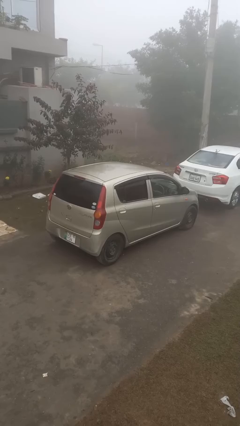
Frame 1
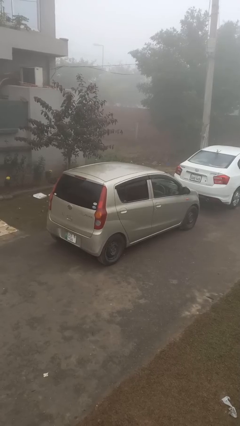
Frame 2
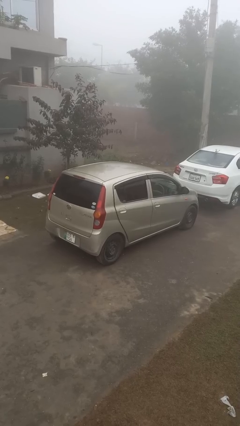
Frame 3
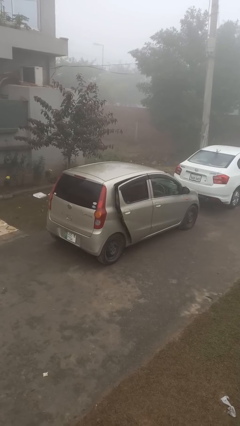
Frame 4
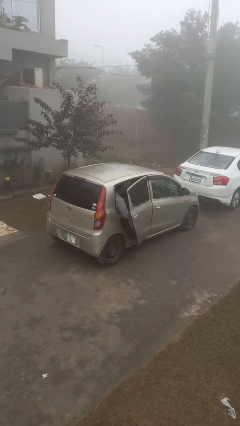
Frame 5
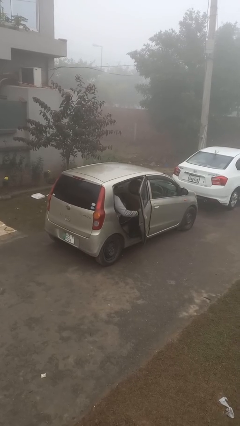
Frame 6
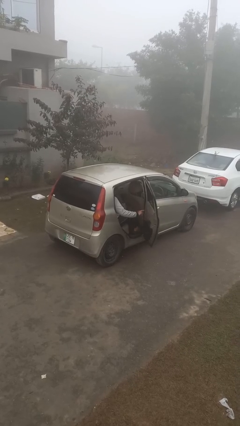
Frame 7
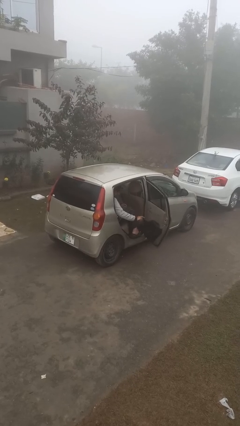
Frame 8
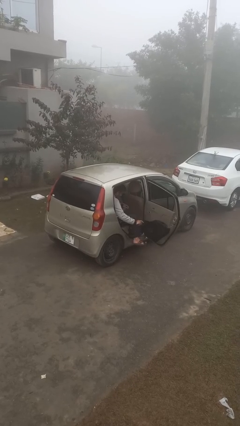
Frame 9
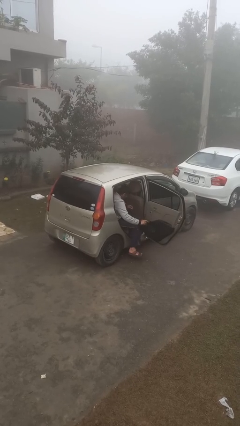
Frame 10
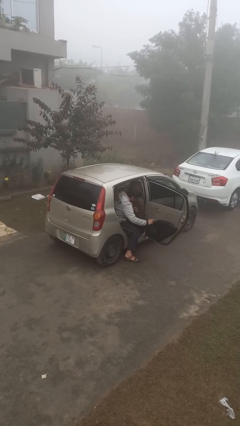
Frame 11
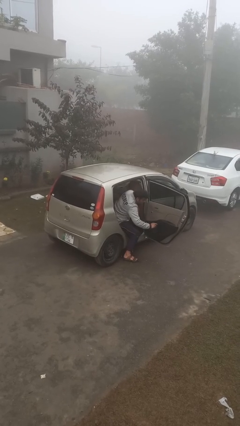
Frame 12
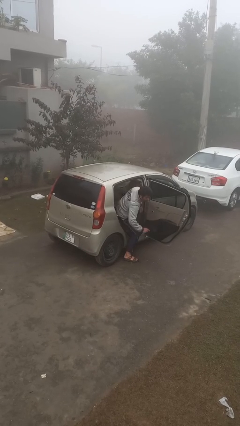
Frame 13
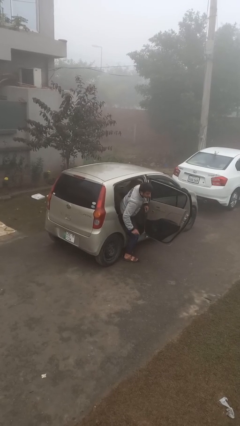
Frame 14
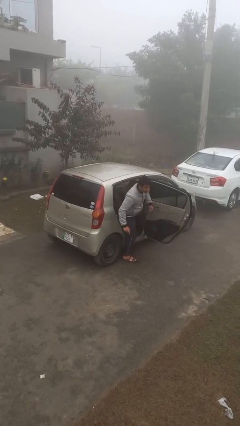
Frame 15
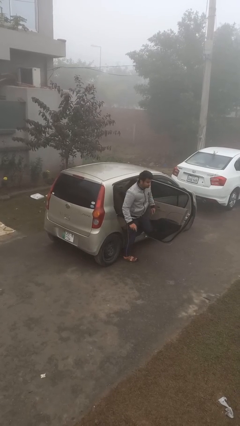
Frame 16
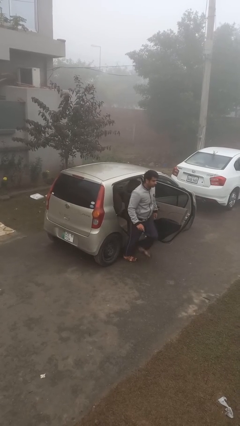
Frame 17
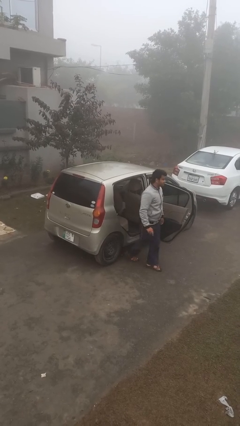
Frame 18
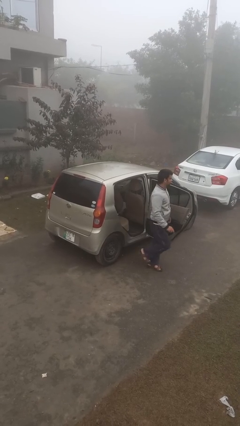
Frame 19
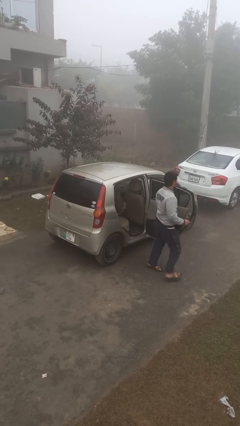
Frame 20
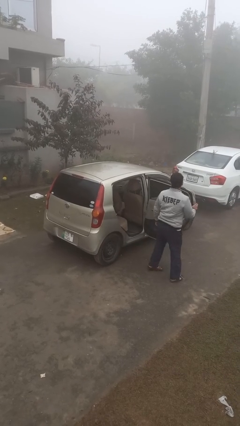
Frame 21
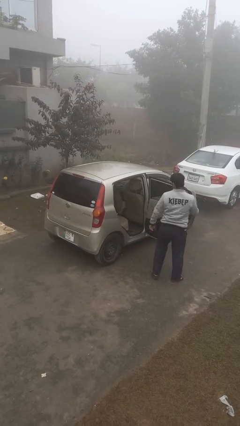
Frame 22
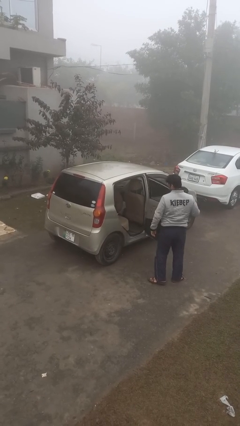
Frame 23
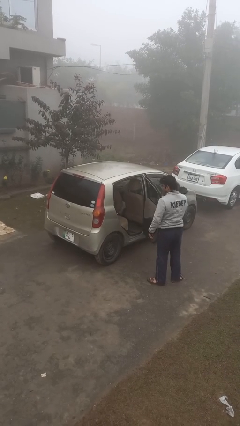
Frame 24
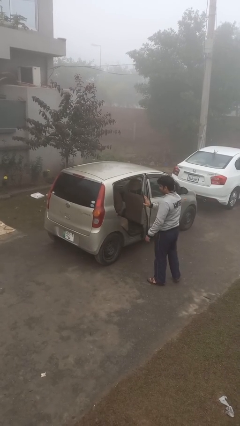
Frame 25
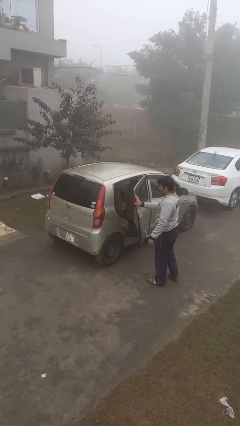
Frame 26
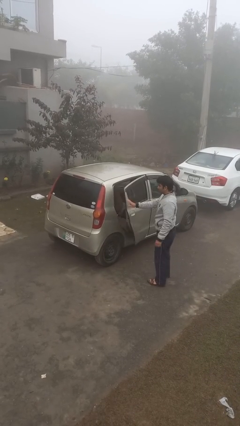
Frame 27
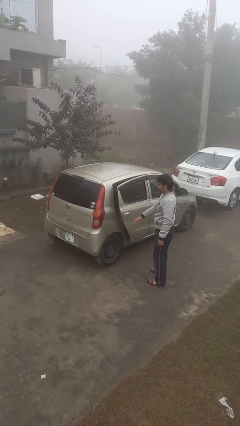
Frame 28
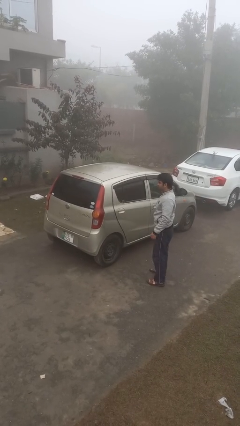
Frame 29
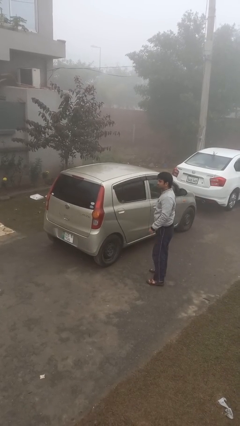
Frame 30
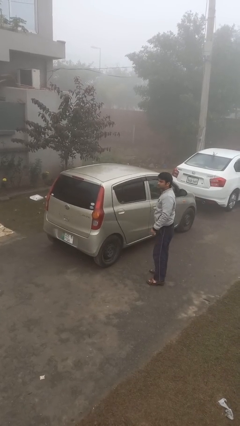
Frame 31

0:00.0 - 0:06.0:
car drops off person

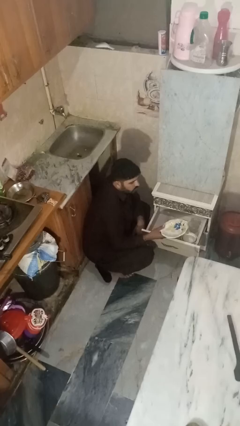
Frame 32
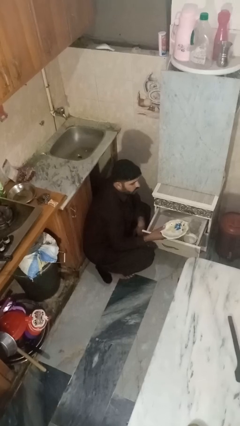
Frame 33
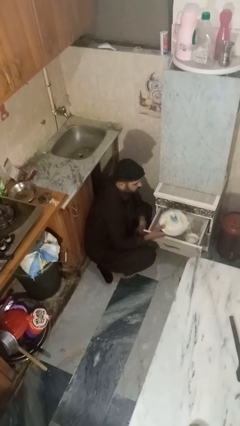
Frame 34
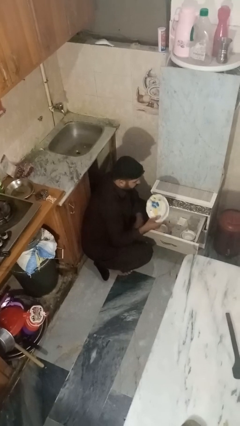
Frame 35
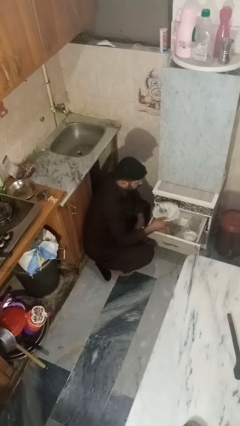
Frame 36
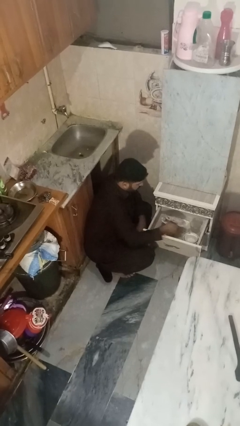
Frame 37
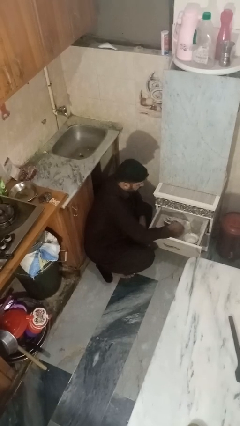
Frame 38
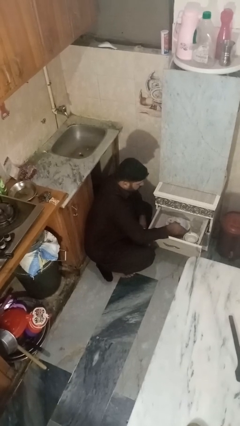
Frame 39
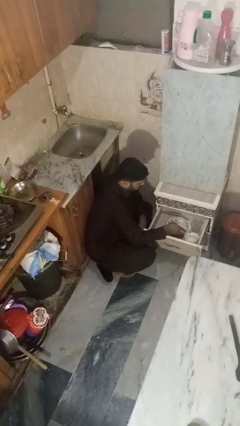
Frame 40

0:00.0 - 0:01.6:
person puts object into kitchen drawer

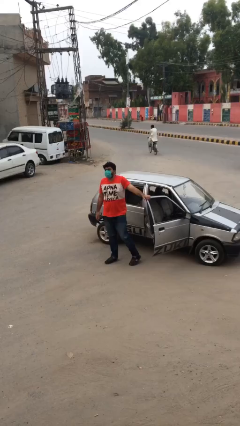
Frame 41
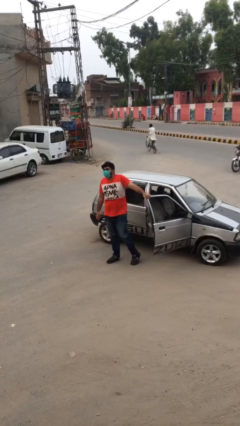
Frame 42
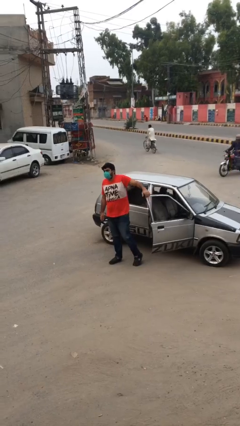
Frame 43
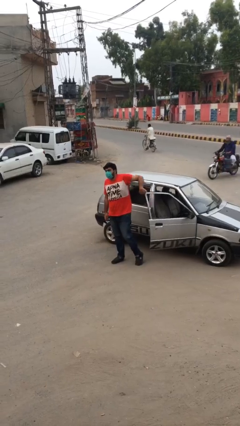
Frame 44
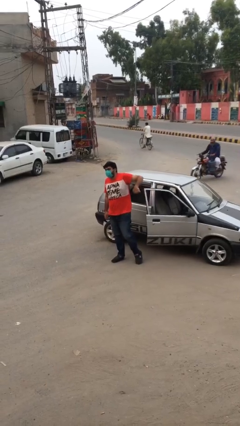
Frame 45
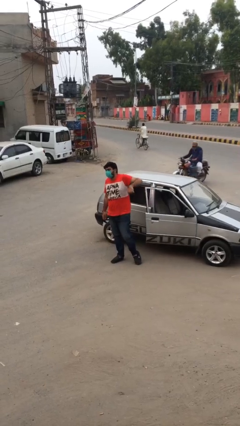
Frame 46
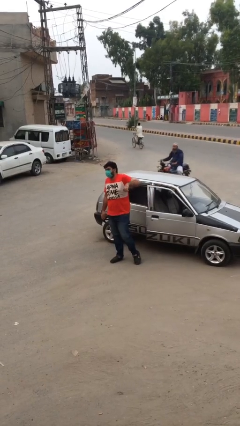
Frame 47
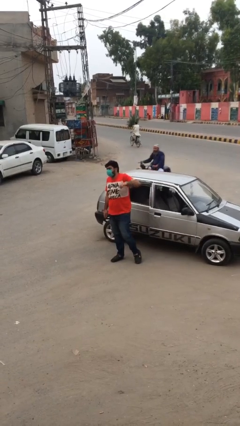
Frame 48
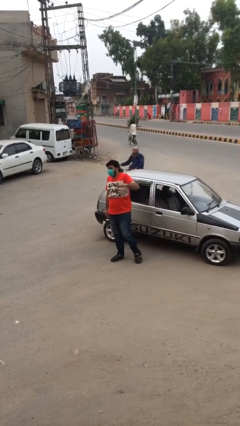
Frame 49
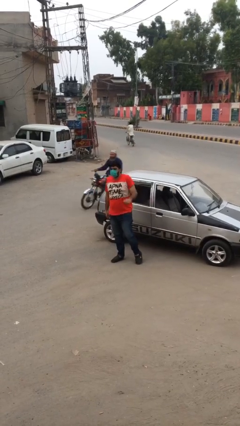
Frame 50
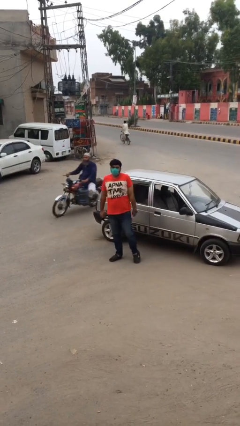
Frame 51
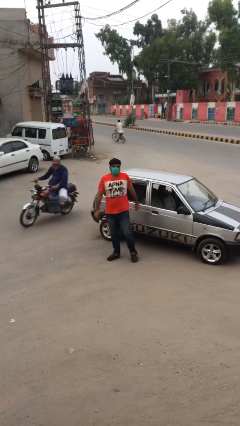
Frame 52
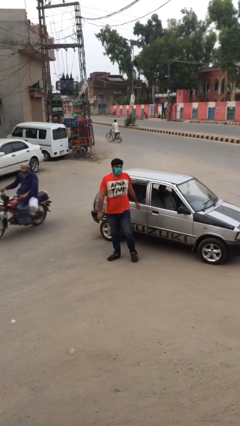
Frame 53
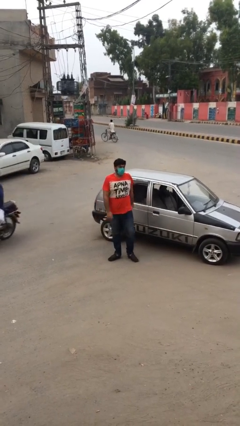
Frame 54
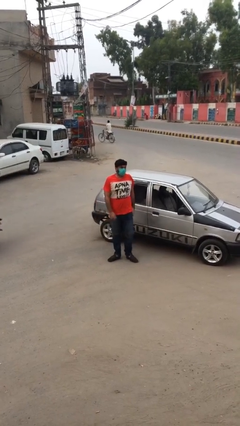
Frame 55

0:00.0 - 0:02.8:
person closes car door

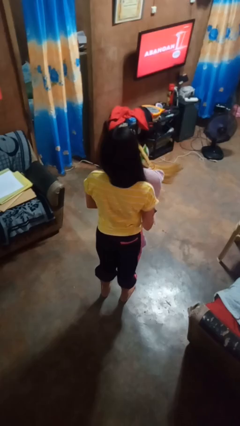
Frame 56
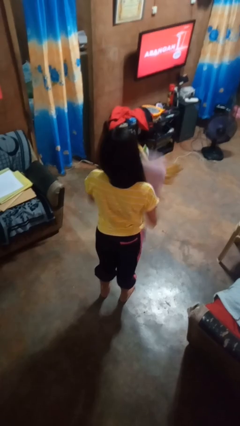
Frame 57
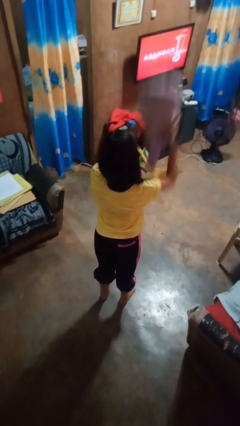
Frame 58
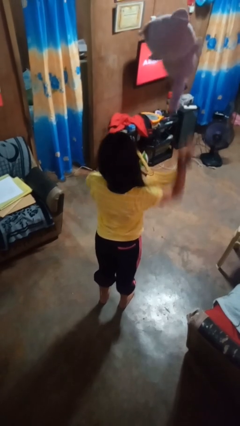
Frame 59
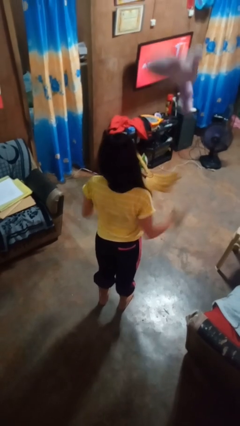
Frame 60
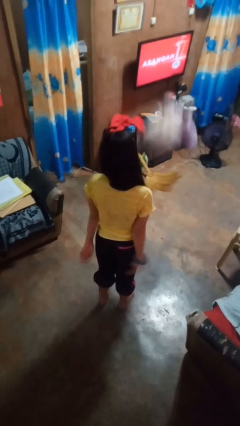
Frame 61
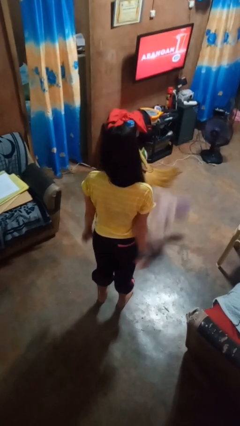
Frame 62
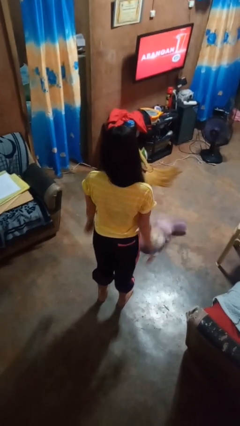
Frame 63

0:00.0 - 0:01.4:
person throws object into air

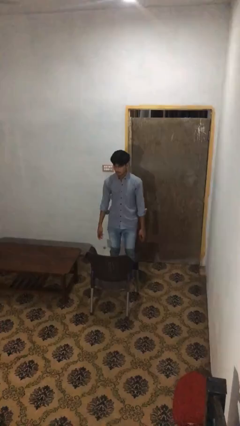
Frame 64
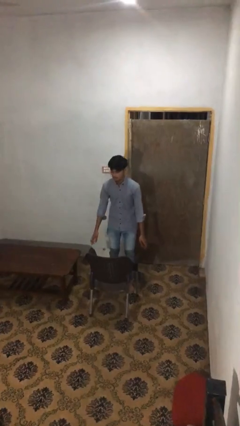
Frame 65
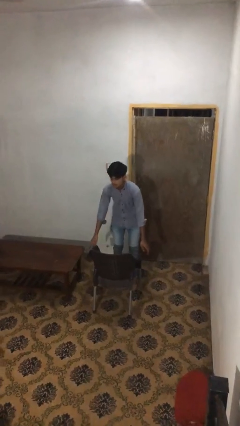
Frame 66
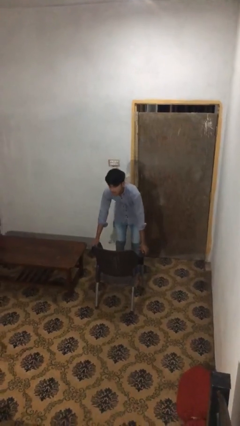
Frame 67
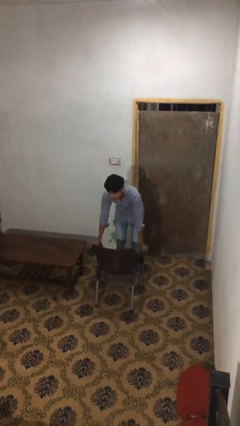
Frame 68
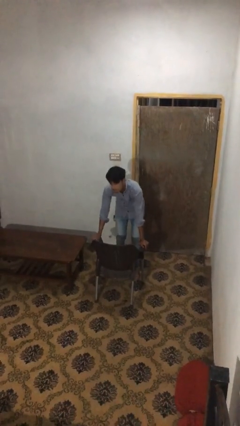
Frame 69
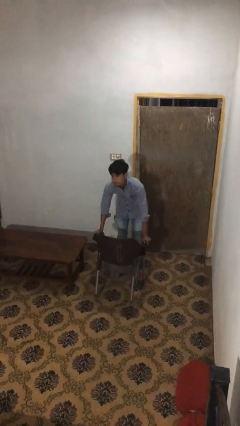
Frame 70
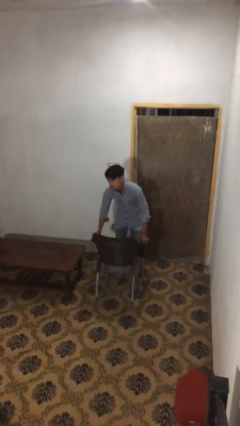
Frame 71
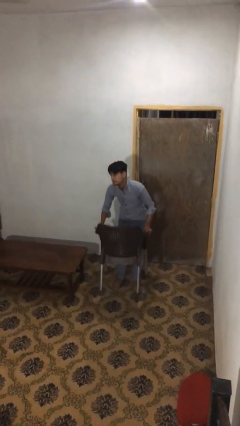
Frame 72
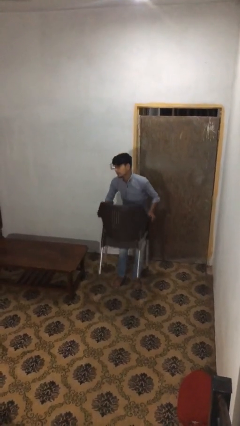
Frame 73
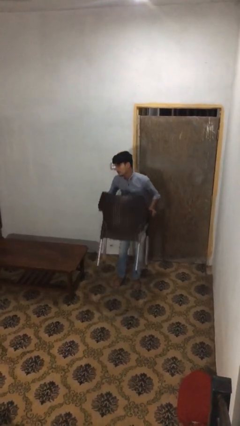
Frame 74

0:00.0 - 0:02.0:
person picks up object from floor

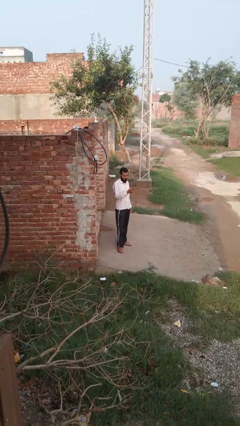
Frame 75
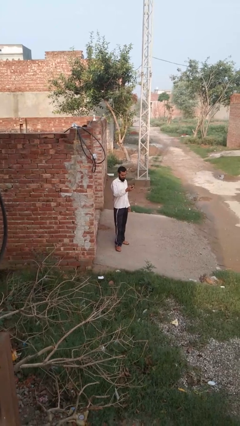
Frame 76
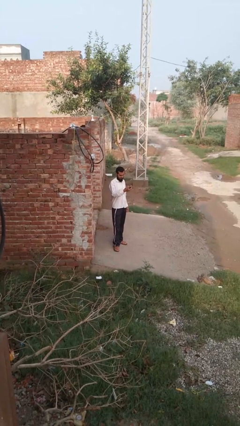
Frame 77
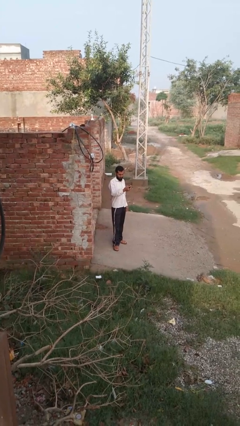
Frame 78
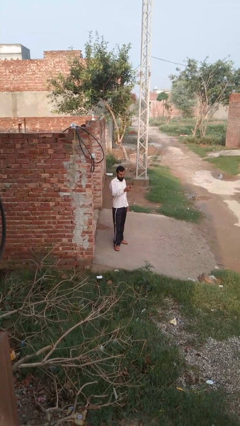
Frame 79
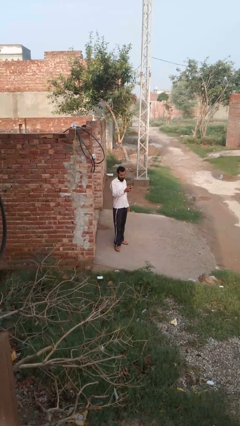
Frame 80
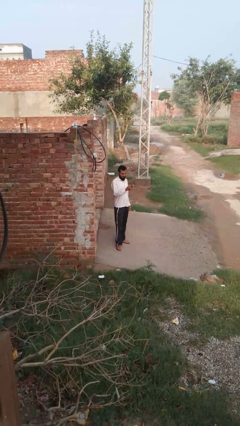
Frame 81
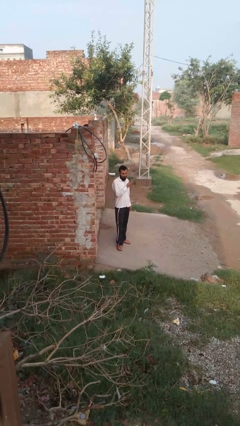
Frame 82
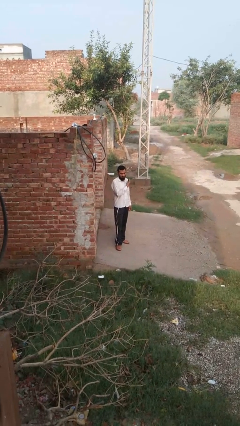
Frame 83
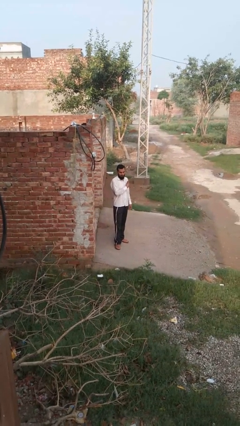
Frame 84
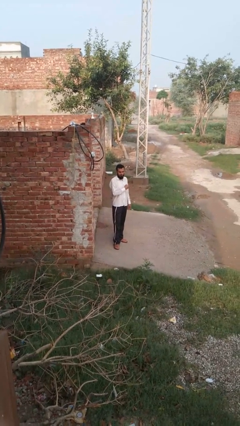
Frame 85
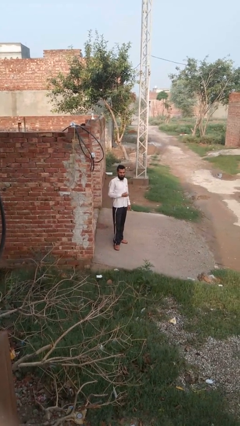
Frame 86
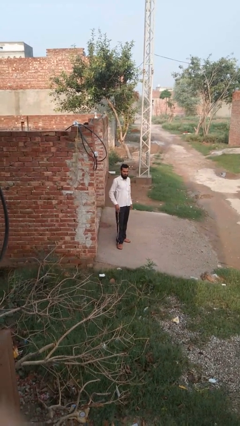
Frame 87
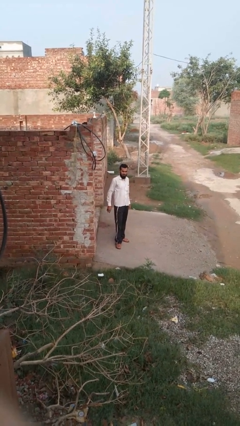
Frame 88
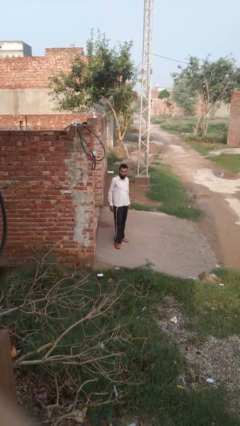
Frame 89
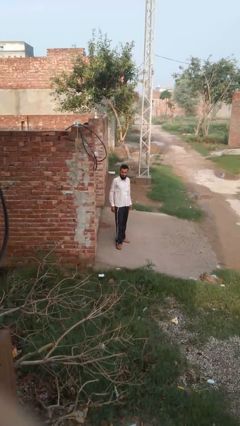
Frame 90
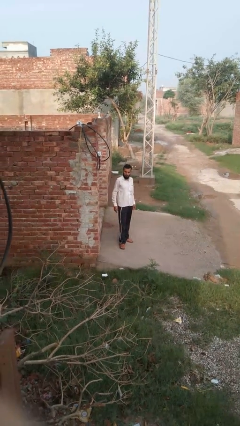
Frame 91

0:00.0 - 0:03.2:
person puts phone into pocket

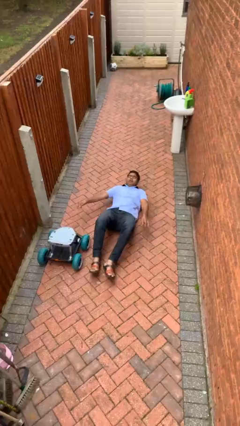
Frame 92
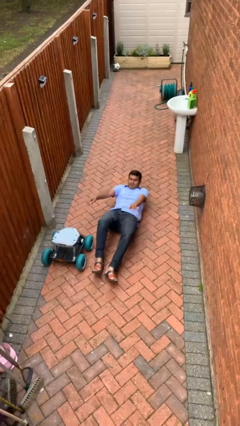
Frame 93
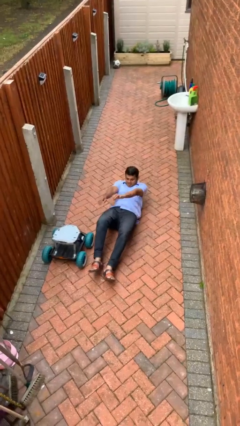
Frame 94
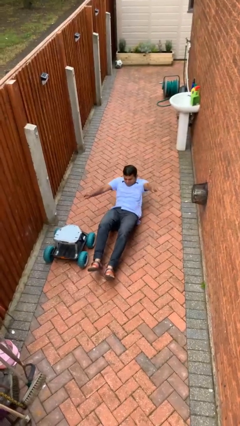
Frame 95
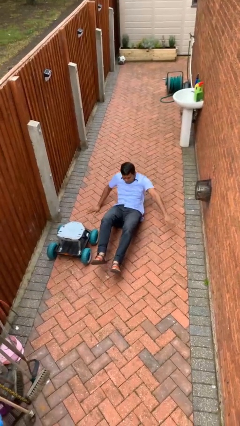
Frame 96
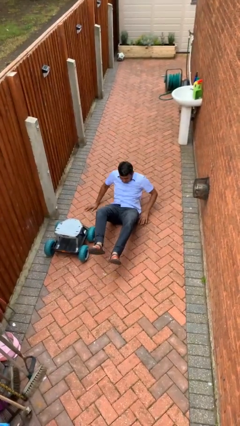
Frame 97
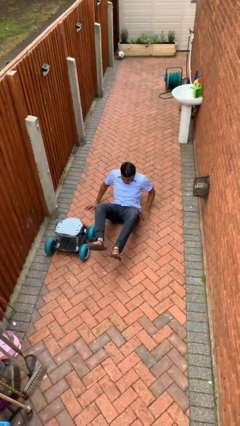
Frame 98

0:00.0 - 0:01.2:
person lies down on floor
